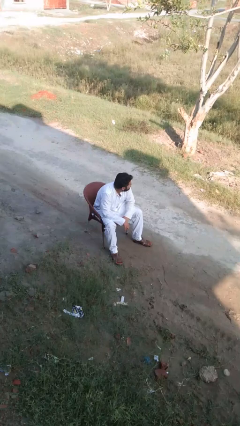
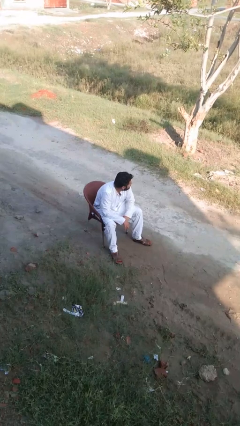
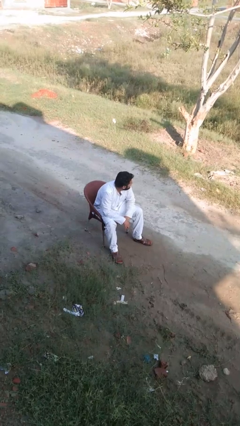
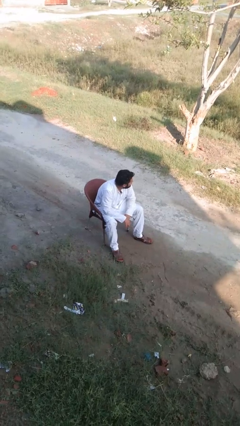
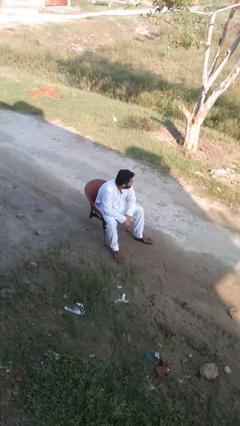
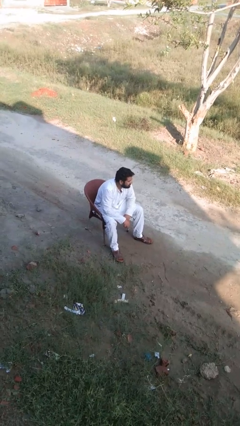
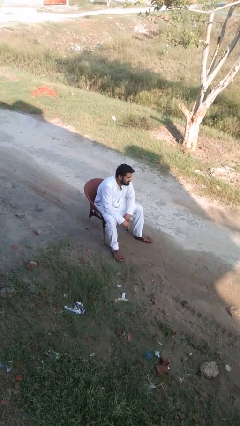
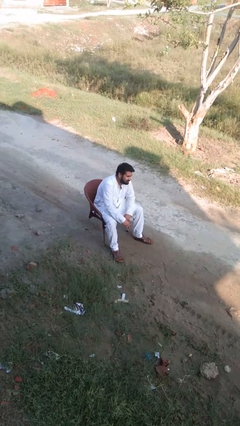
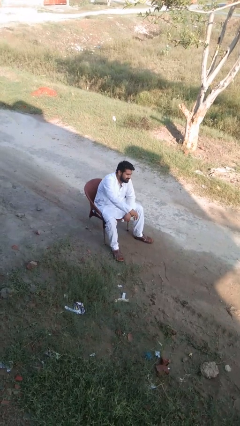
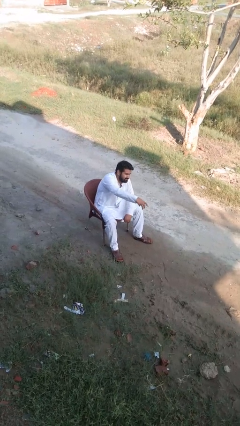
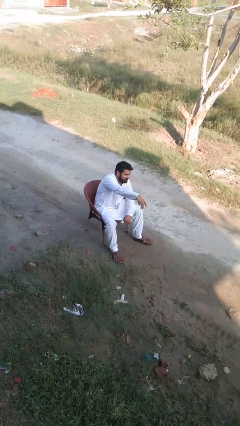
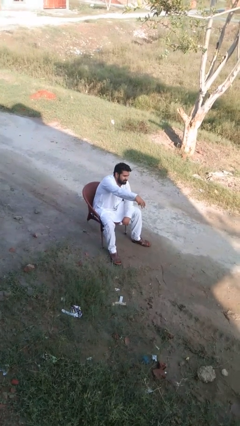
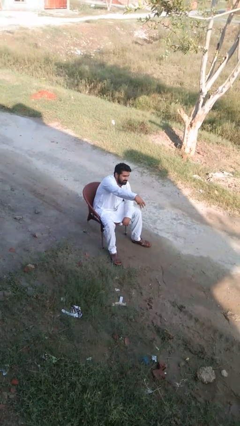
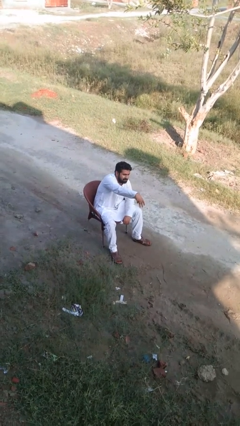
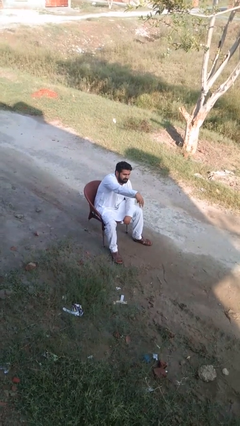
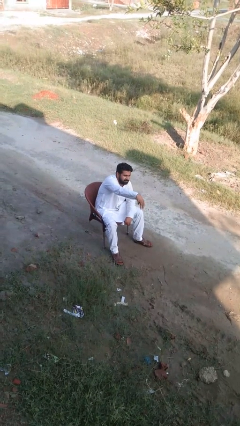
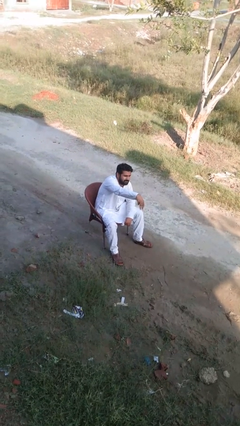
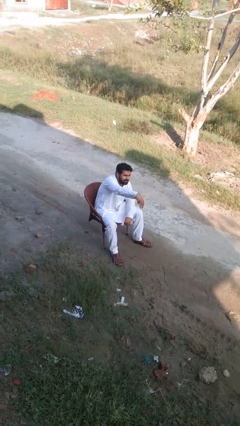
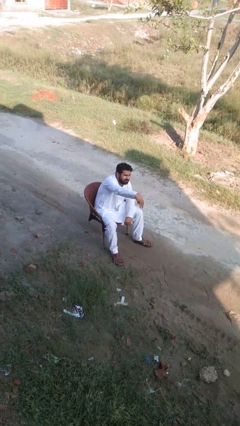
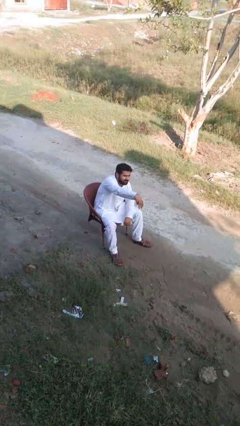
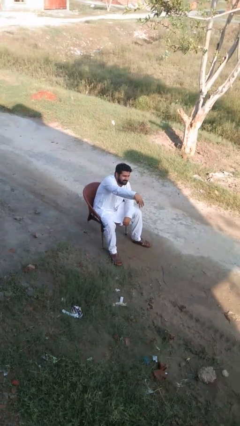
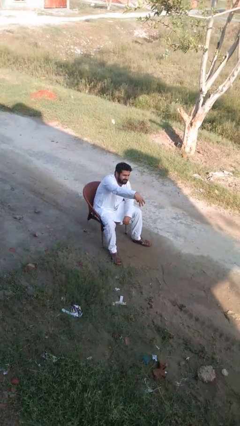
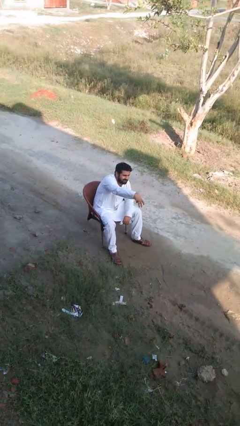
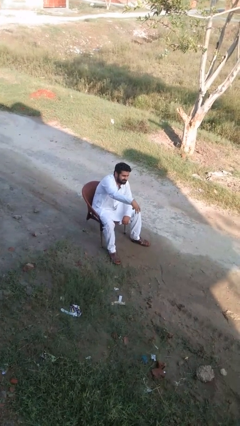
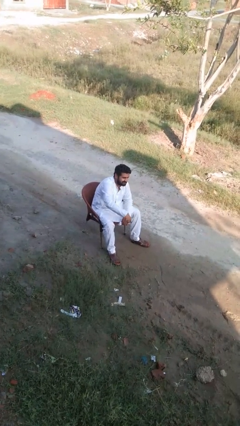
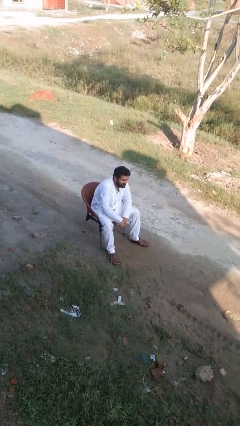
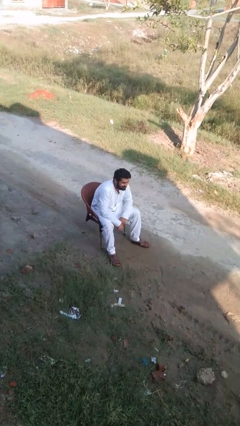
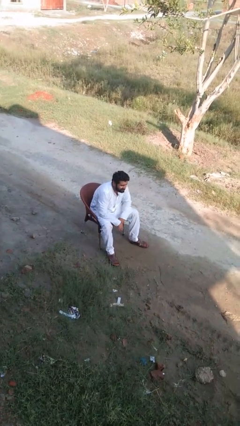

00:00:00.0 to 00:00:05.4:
person gestures hang loose

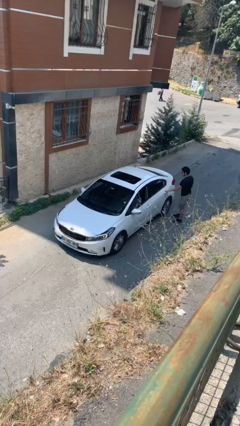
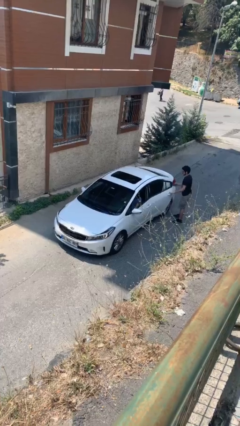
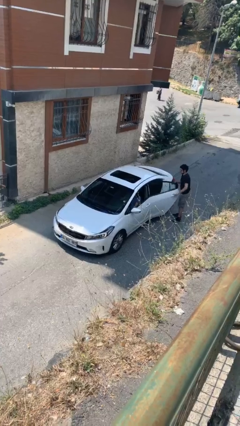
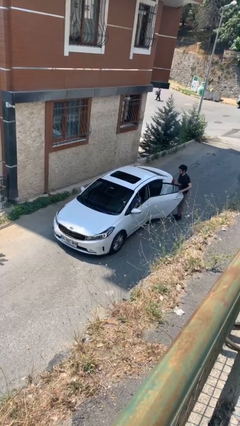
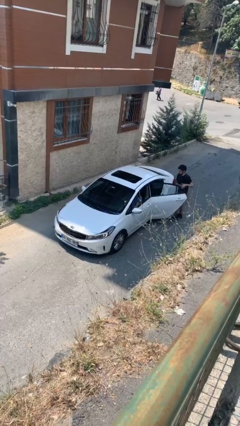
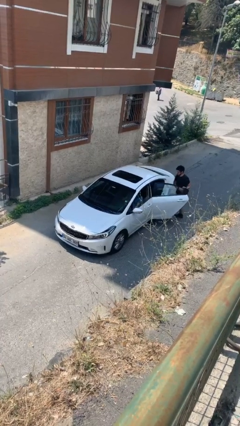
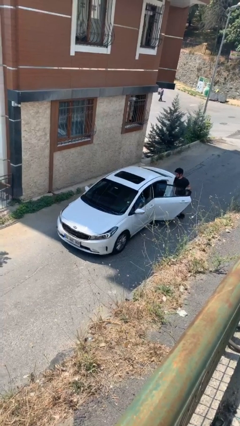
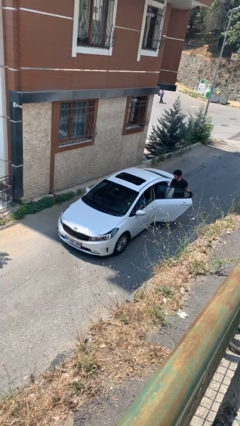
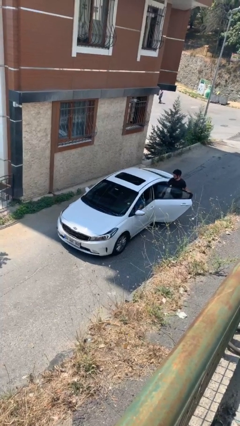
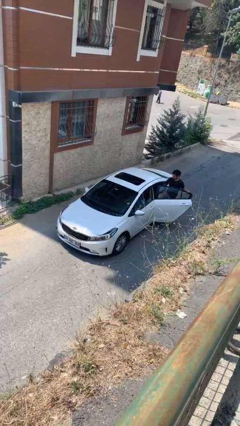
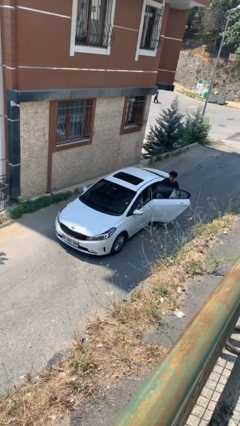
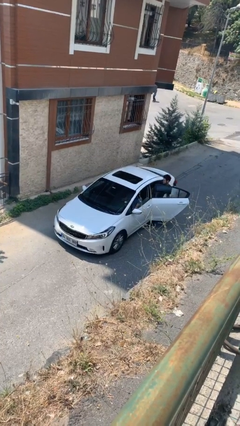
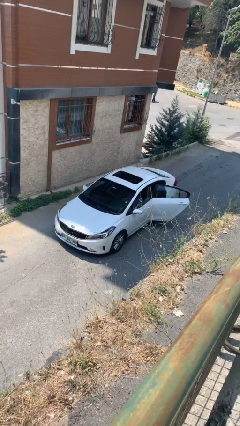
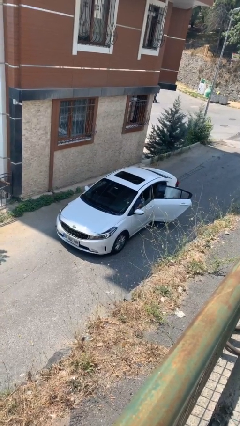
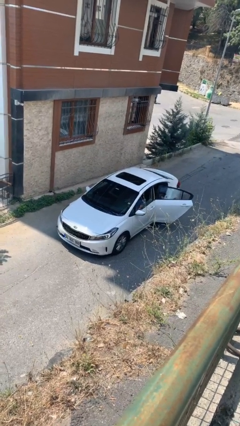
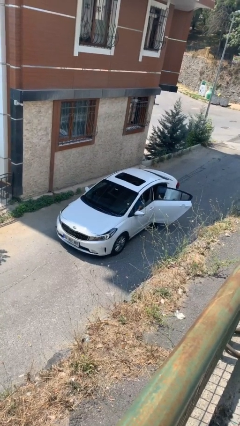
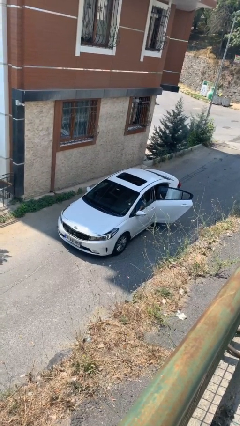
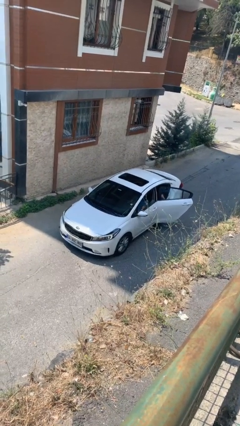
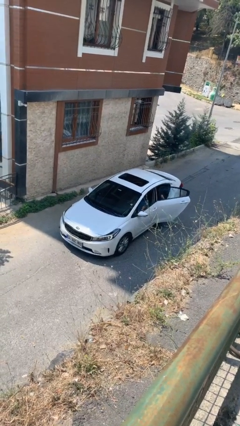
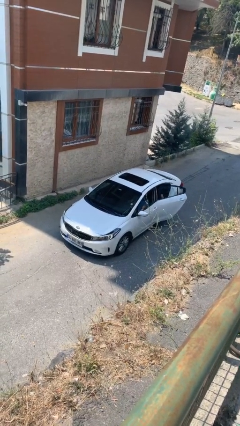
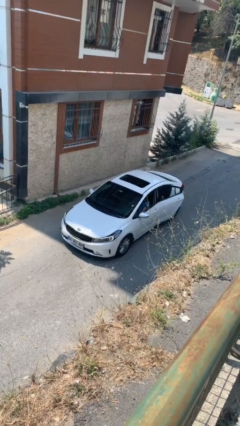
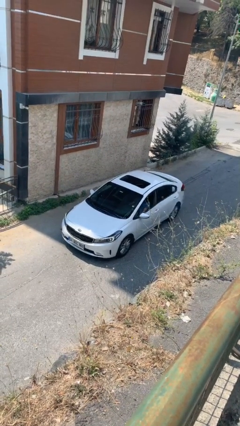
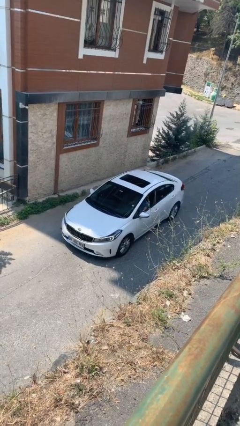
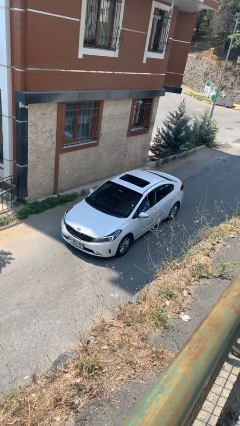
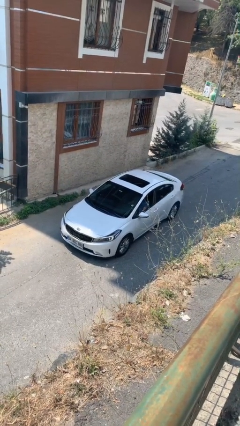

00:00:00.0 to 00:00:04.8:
car picks up person

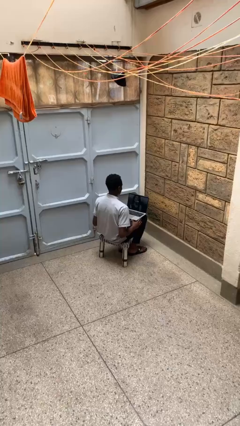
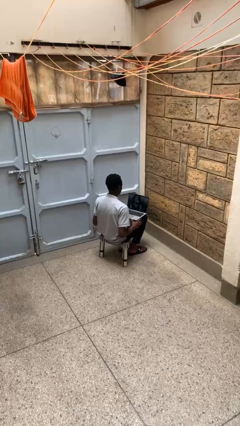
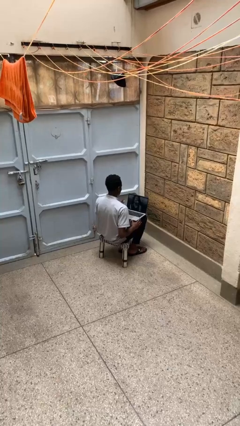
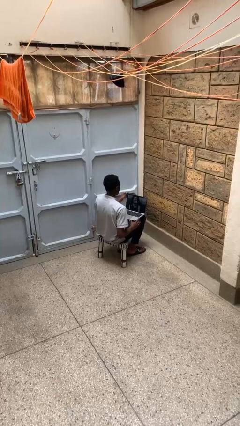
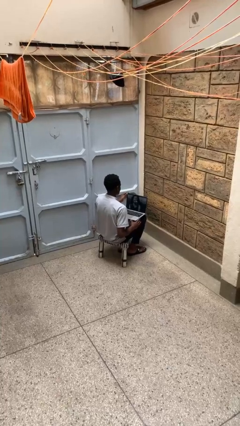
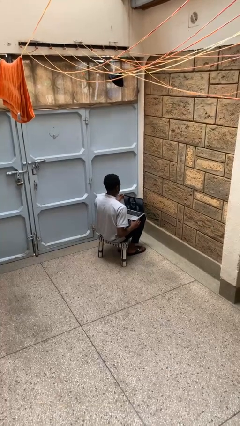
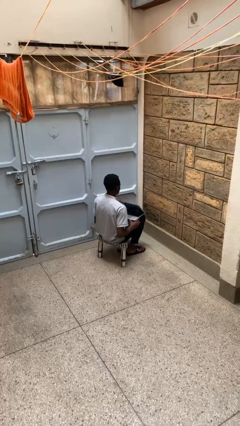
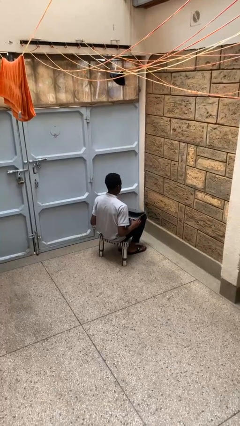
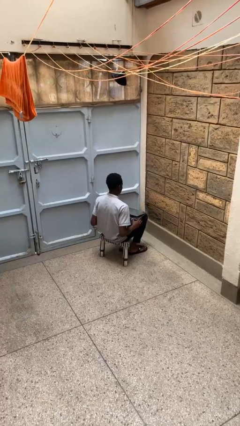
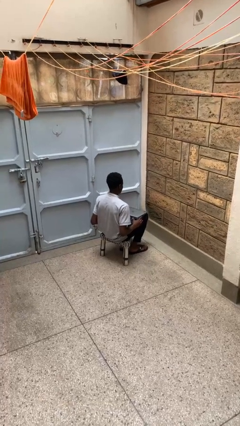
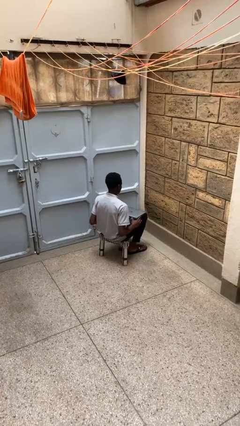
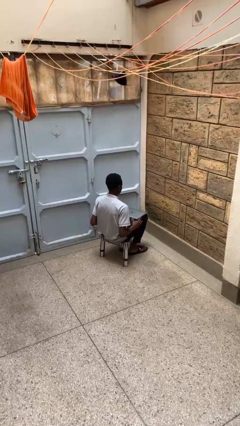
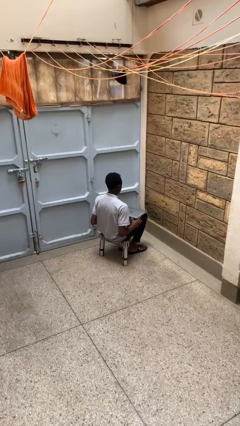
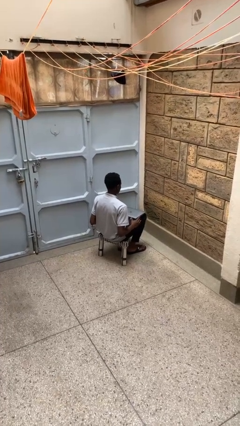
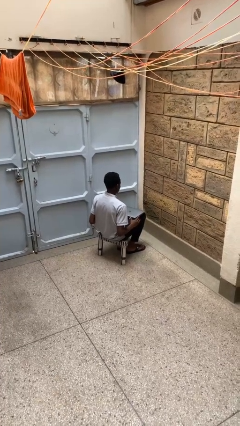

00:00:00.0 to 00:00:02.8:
person closes laptop

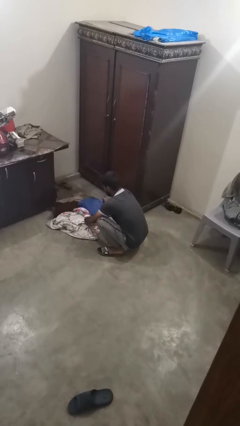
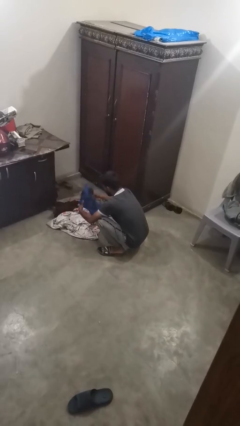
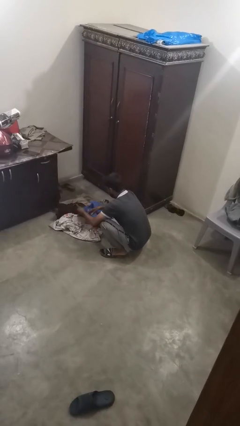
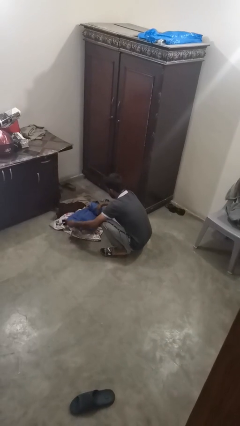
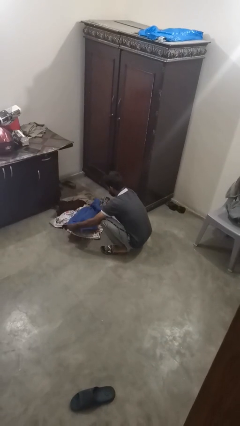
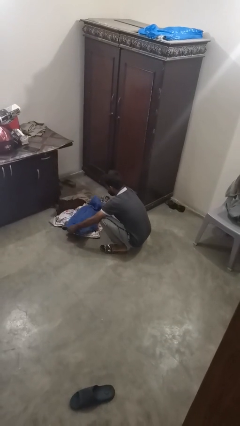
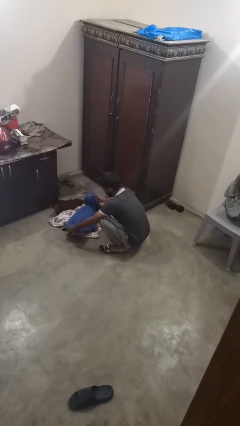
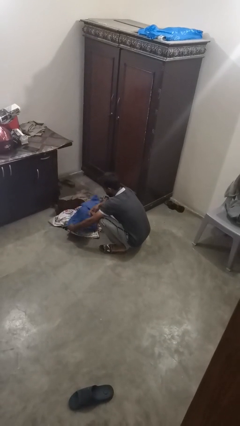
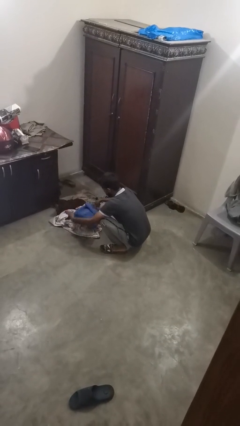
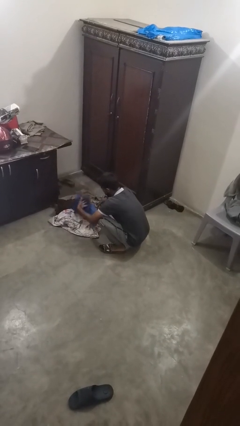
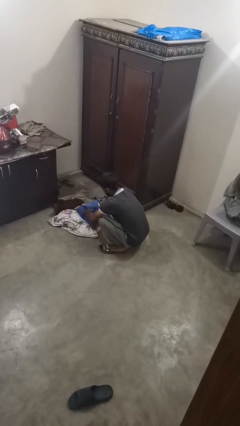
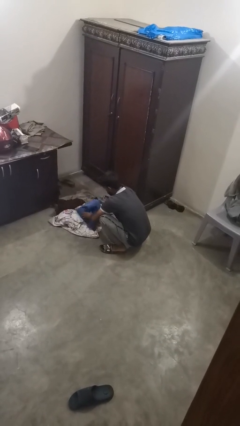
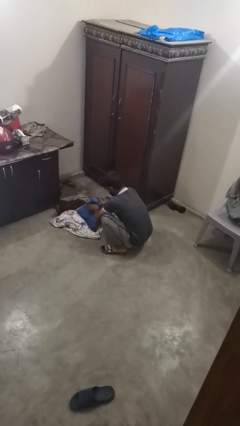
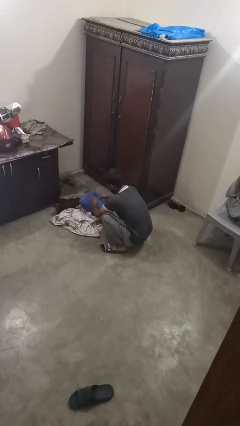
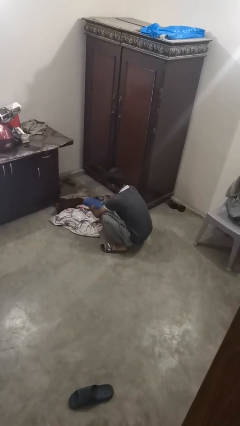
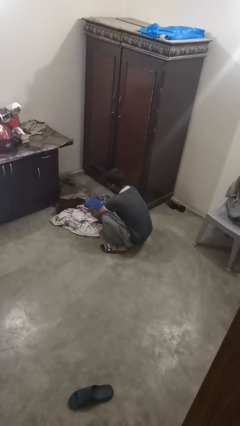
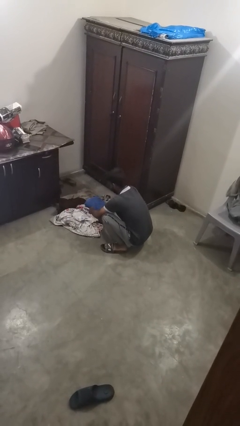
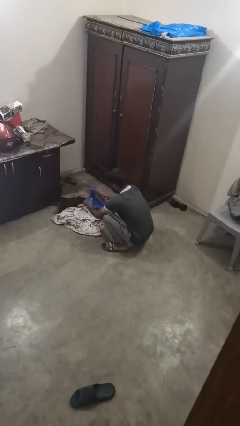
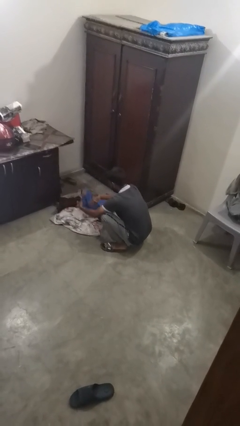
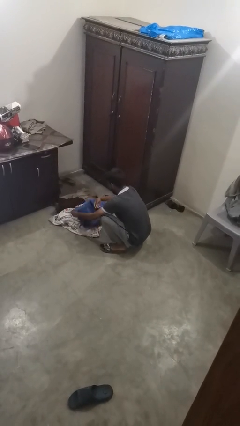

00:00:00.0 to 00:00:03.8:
person folds pants

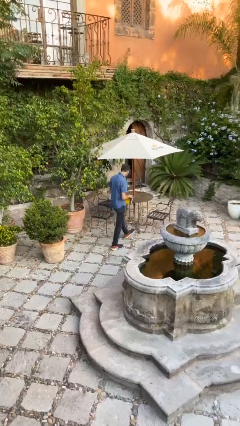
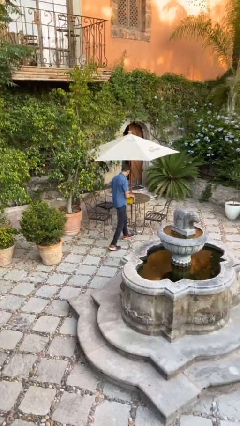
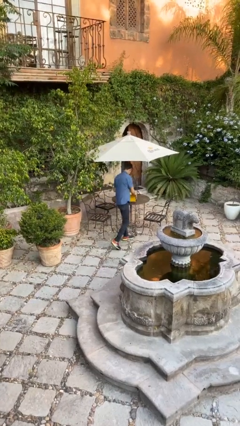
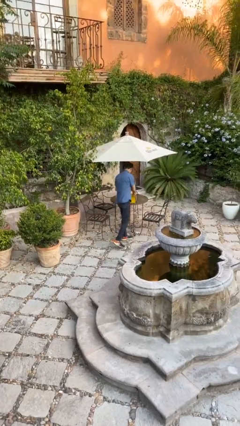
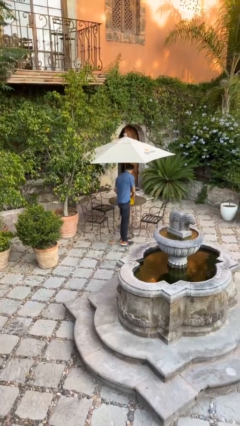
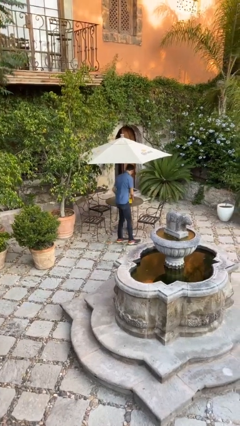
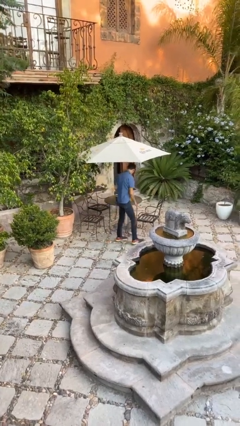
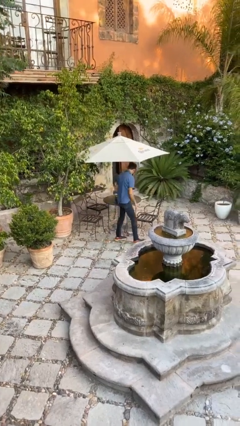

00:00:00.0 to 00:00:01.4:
person puts down object on table
